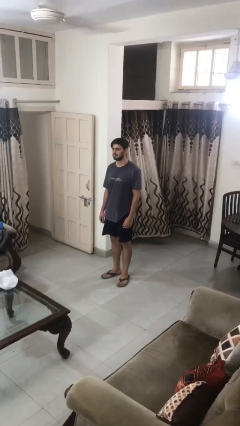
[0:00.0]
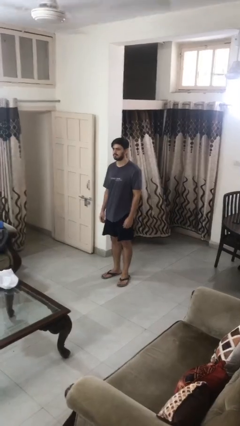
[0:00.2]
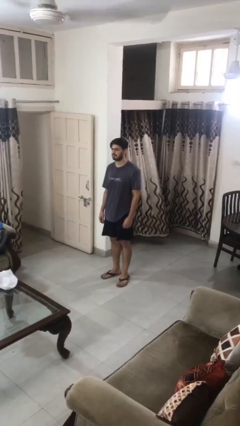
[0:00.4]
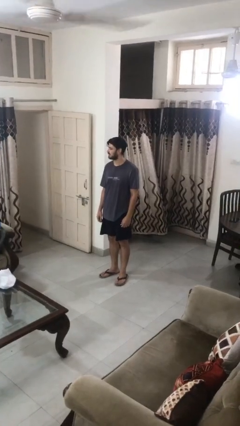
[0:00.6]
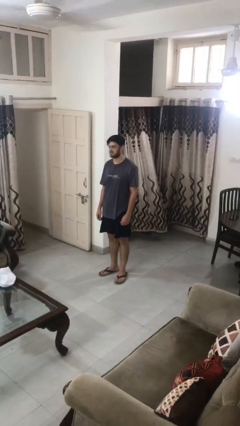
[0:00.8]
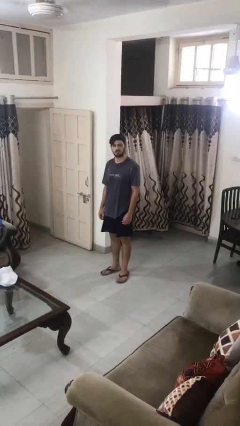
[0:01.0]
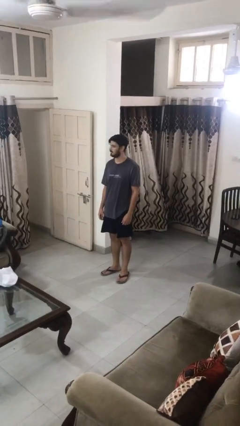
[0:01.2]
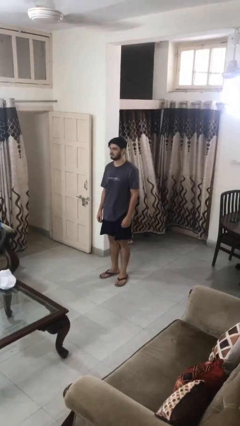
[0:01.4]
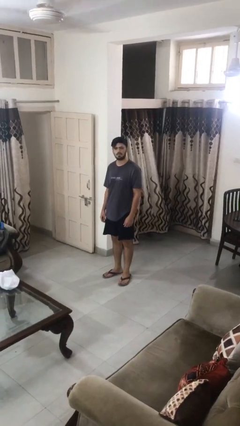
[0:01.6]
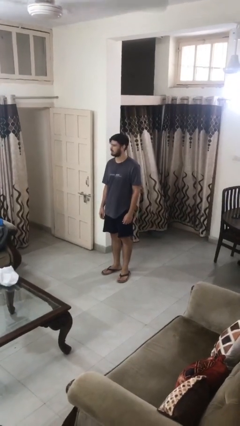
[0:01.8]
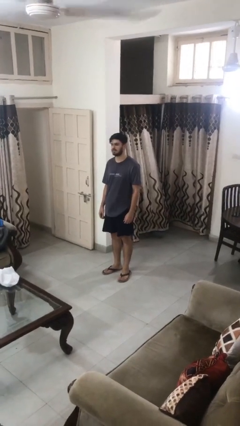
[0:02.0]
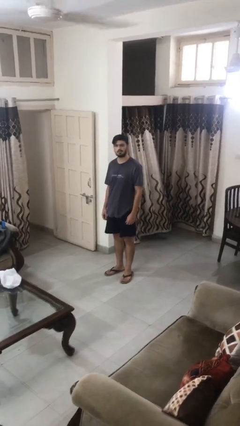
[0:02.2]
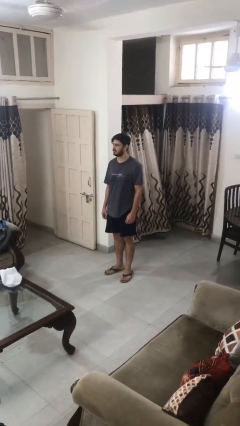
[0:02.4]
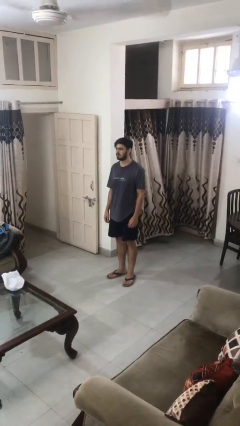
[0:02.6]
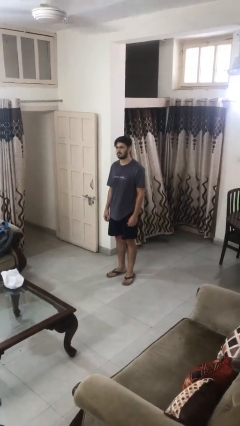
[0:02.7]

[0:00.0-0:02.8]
person shakes head

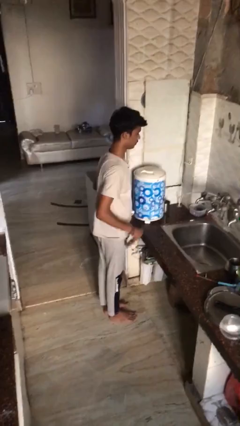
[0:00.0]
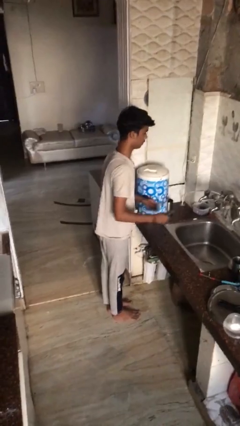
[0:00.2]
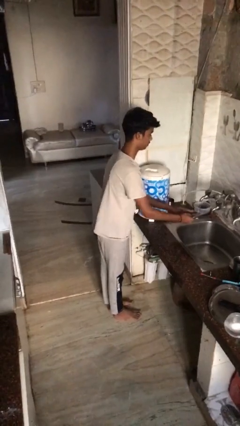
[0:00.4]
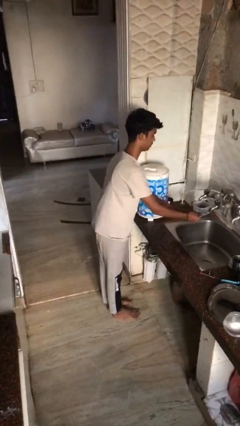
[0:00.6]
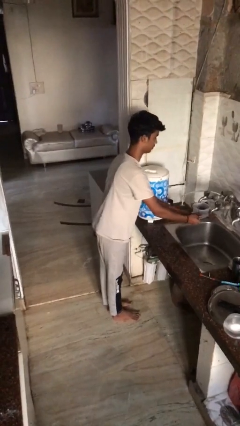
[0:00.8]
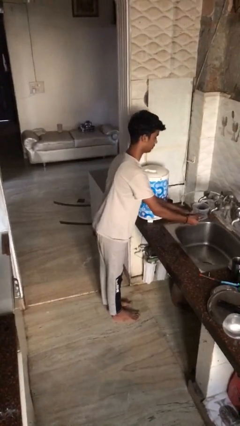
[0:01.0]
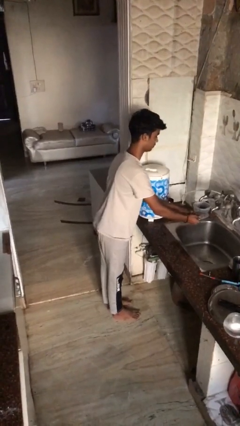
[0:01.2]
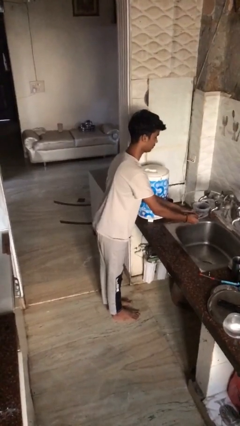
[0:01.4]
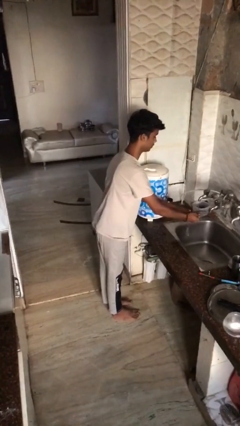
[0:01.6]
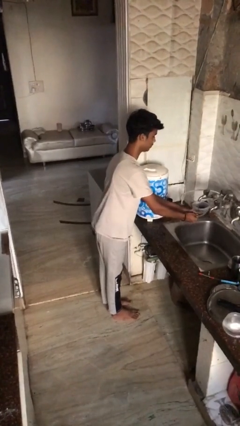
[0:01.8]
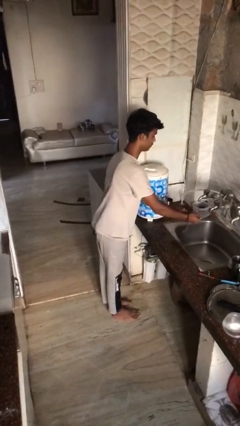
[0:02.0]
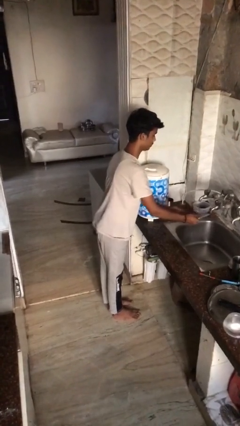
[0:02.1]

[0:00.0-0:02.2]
person washes dish

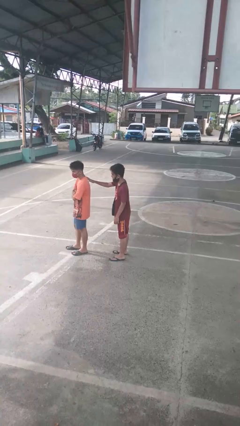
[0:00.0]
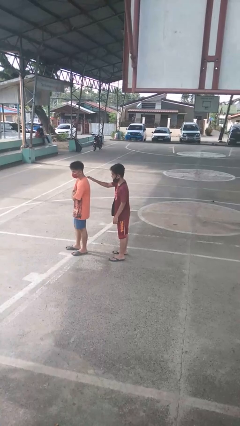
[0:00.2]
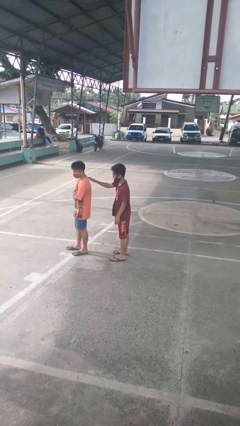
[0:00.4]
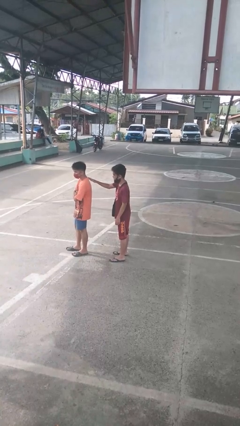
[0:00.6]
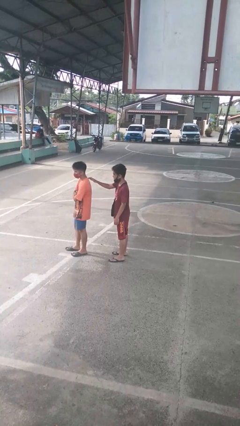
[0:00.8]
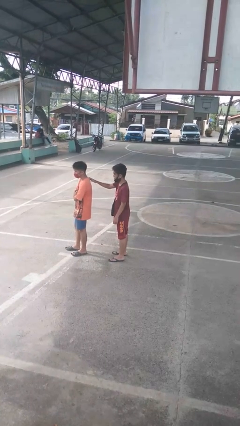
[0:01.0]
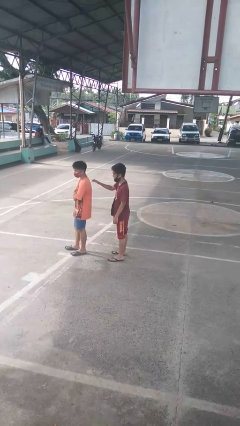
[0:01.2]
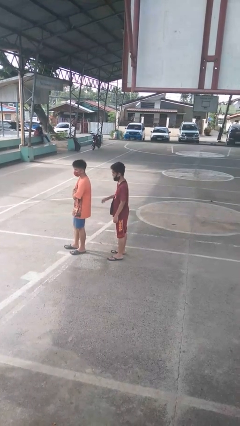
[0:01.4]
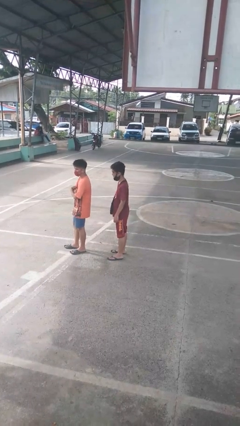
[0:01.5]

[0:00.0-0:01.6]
person touches back of person

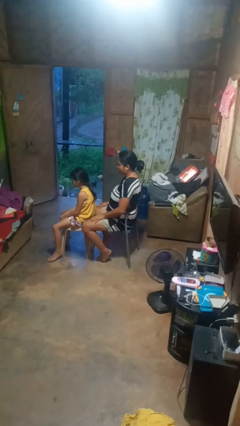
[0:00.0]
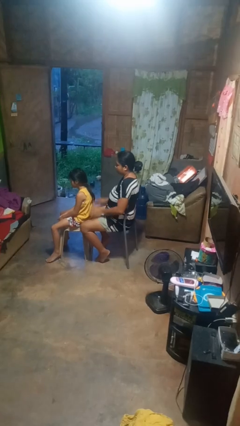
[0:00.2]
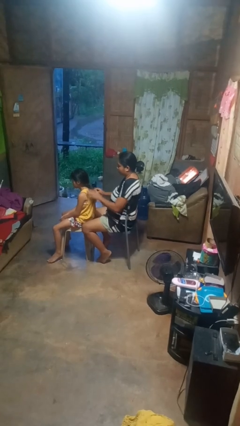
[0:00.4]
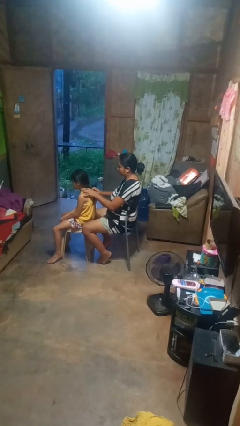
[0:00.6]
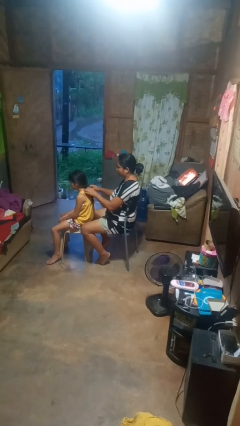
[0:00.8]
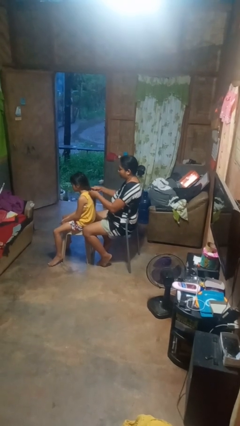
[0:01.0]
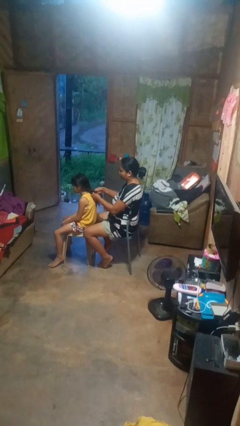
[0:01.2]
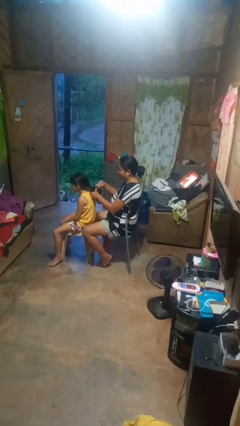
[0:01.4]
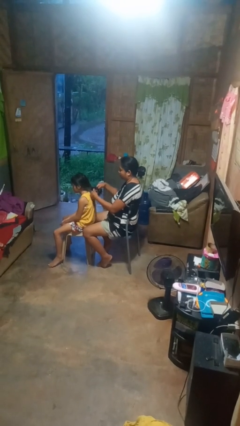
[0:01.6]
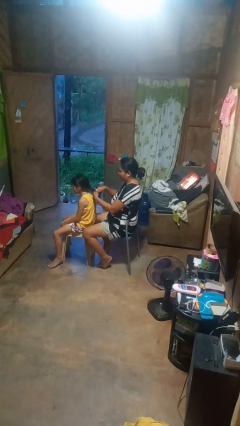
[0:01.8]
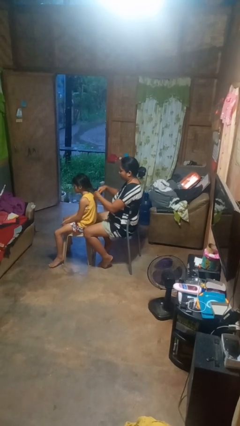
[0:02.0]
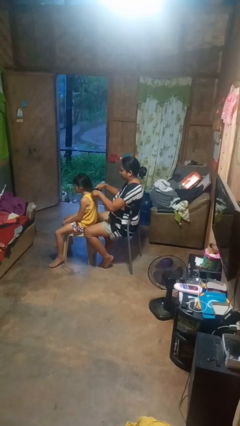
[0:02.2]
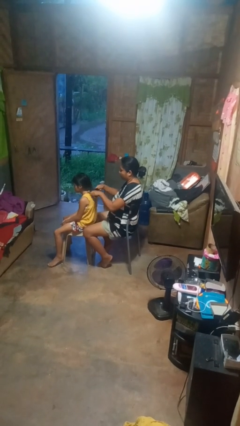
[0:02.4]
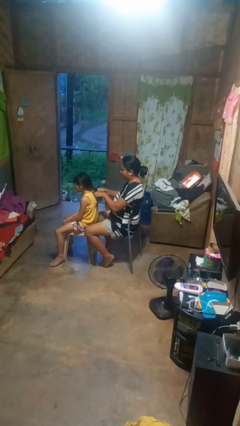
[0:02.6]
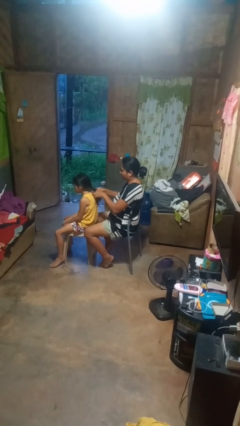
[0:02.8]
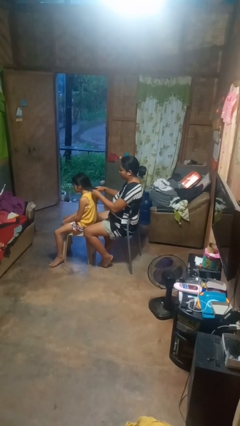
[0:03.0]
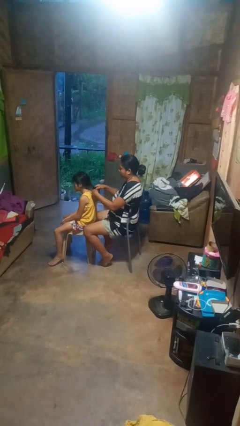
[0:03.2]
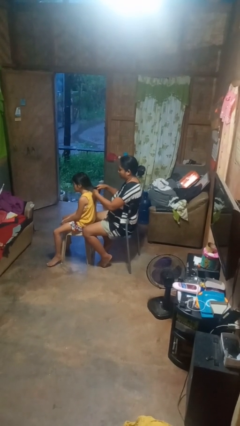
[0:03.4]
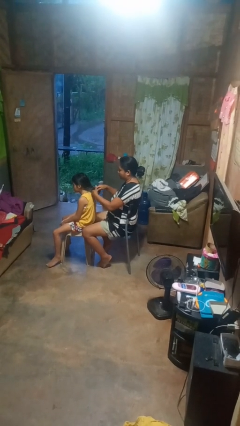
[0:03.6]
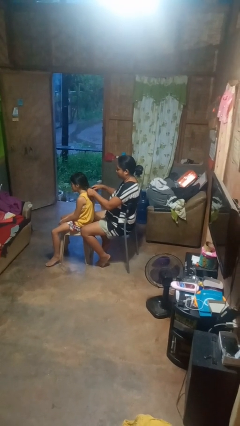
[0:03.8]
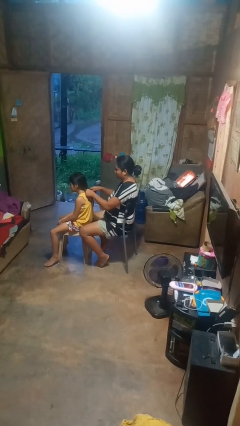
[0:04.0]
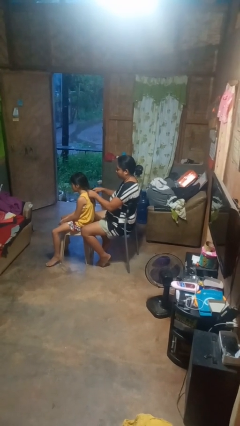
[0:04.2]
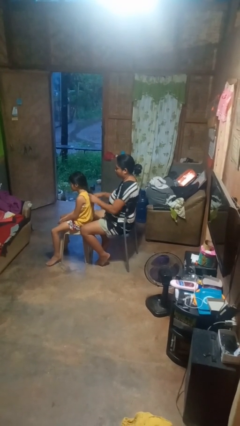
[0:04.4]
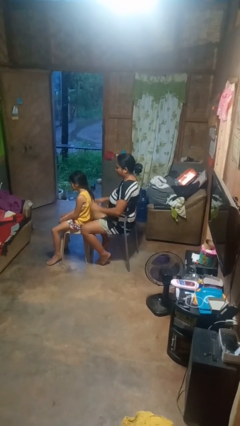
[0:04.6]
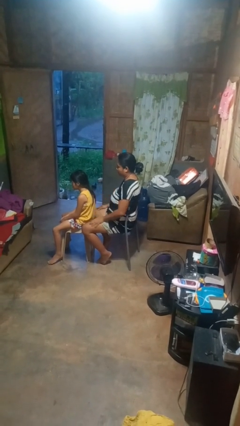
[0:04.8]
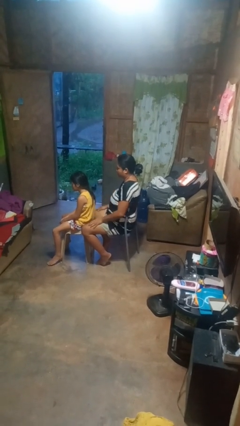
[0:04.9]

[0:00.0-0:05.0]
person braids hair of person

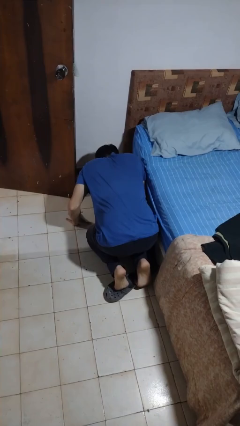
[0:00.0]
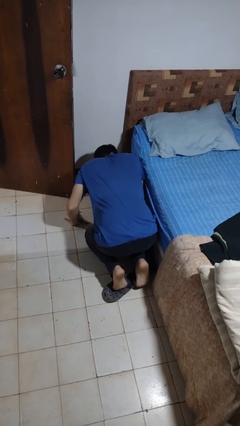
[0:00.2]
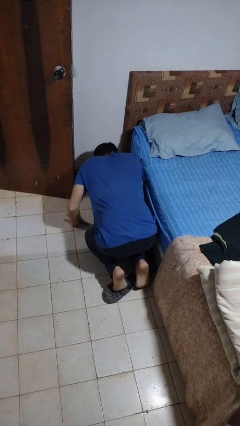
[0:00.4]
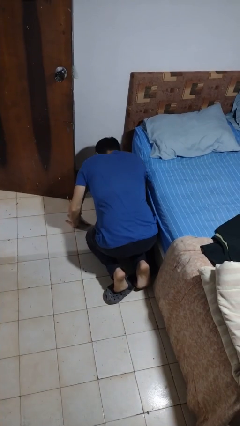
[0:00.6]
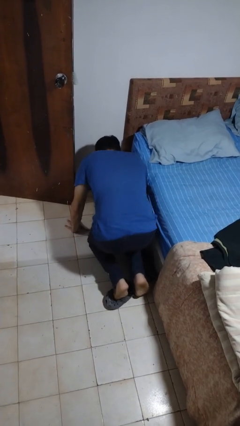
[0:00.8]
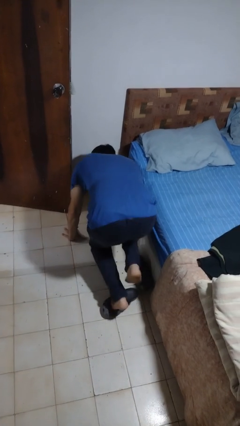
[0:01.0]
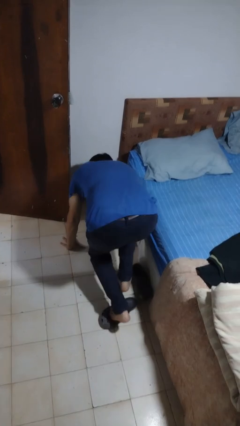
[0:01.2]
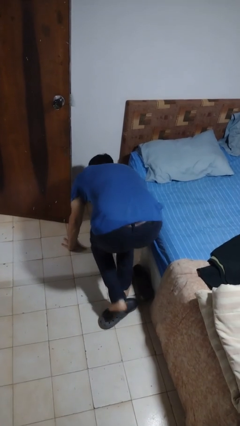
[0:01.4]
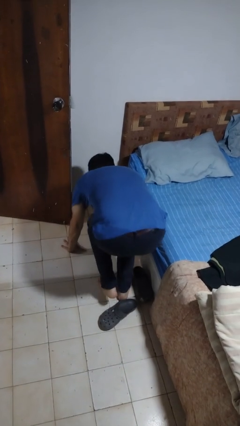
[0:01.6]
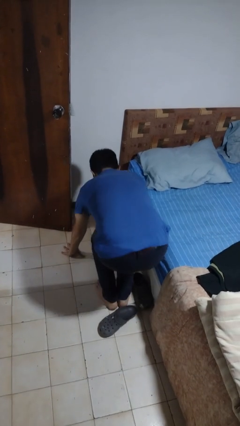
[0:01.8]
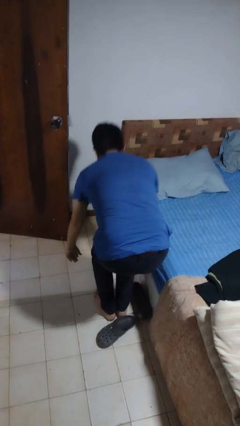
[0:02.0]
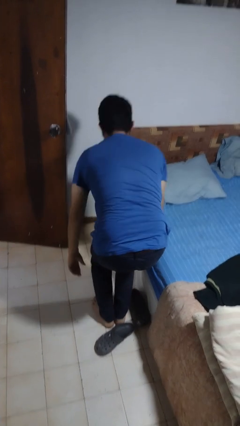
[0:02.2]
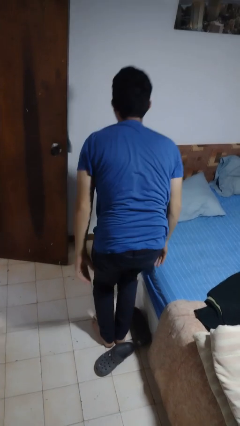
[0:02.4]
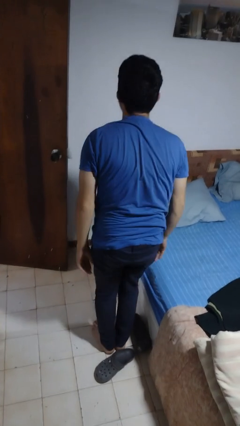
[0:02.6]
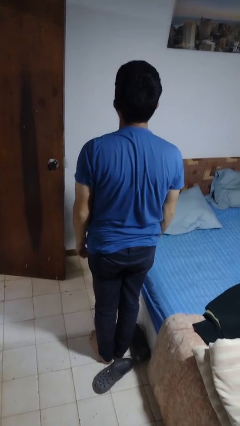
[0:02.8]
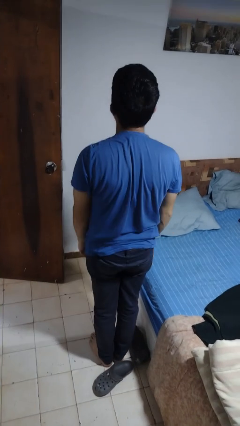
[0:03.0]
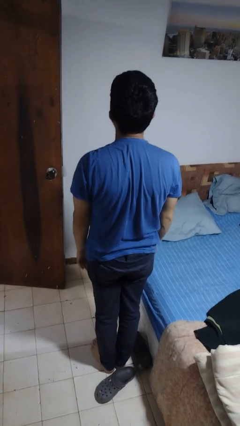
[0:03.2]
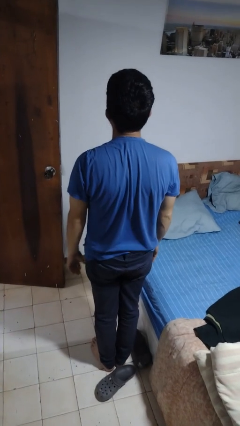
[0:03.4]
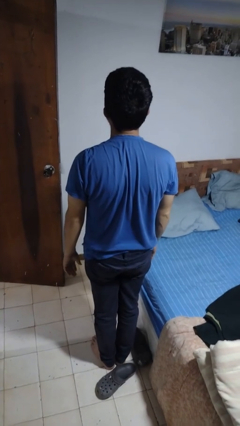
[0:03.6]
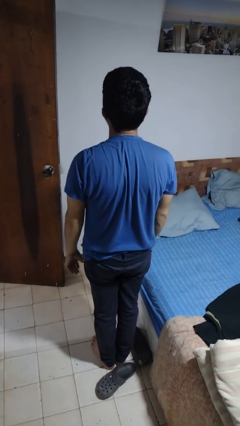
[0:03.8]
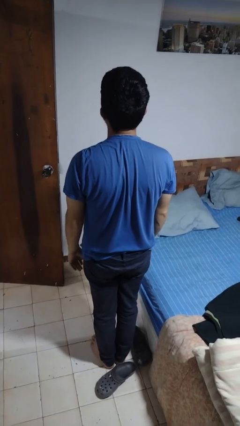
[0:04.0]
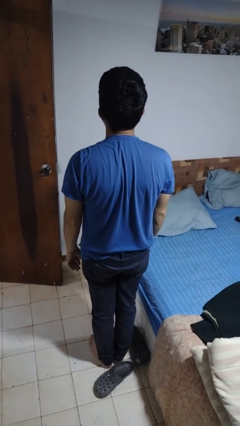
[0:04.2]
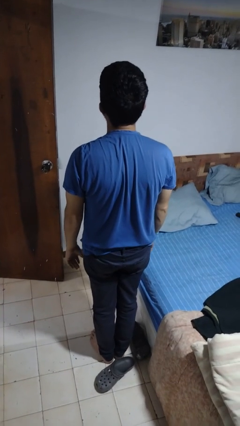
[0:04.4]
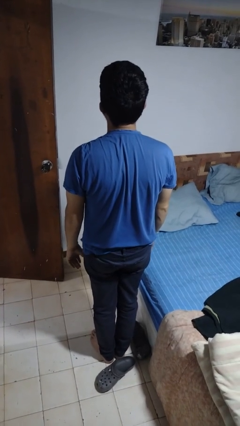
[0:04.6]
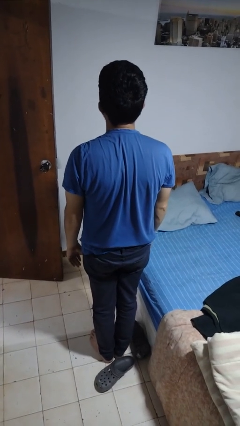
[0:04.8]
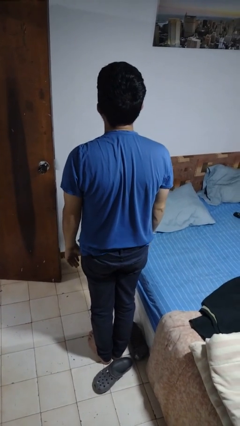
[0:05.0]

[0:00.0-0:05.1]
person stands up from floor

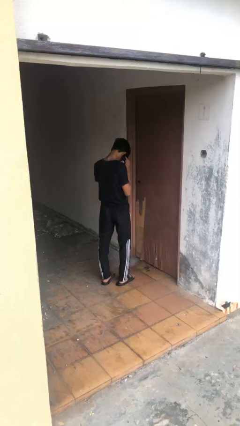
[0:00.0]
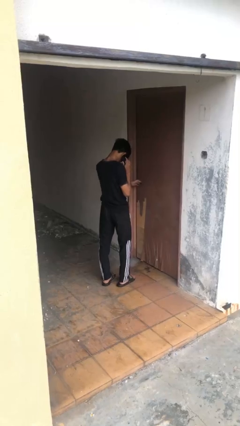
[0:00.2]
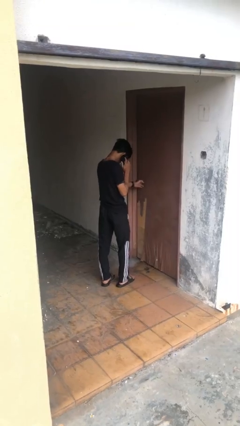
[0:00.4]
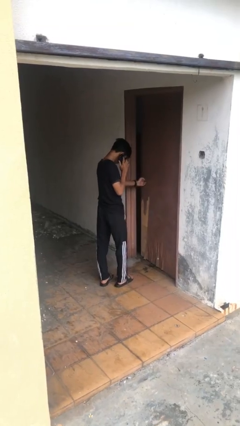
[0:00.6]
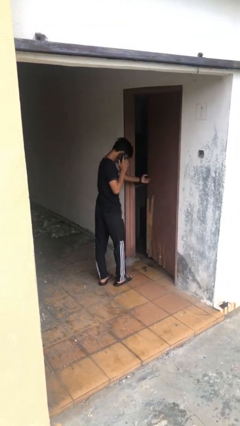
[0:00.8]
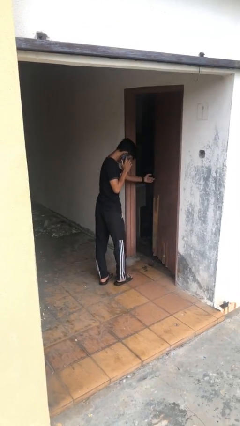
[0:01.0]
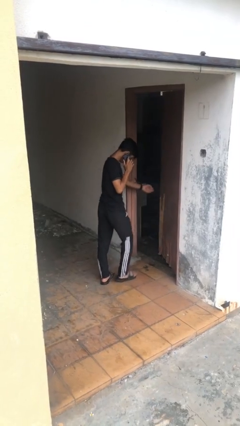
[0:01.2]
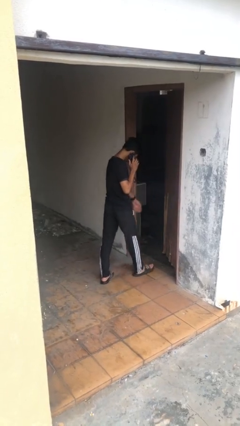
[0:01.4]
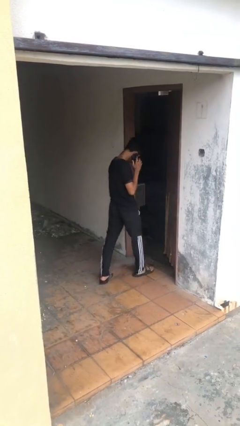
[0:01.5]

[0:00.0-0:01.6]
person opens facility door
